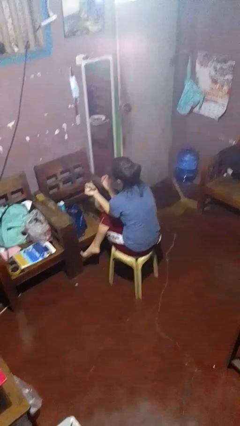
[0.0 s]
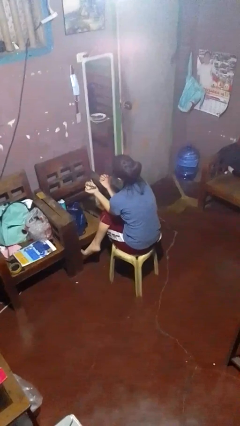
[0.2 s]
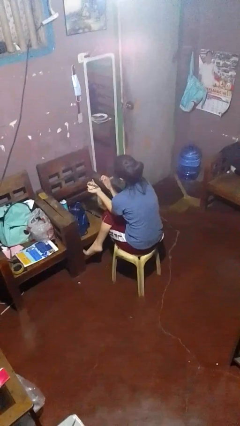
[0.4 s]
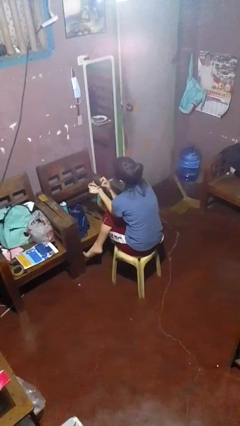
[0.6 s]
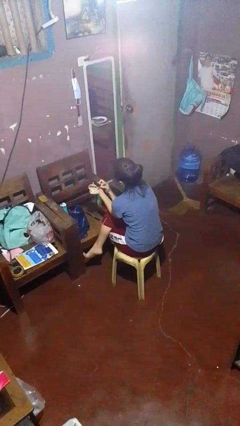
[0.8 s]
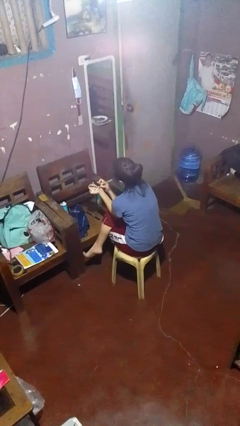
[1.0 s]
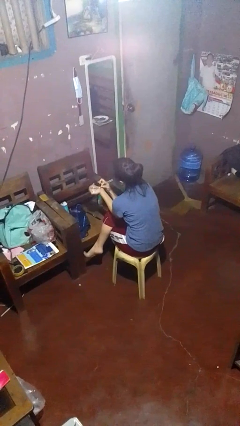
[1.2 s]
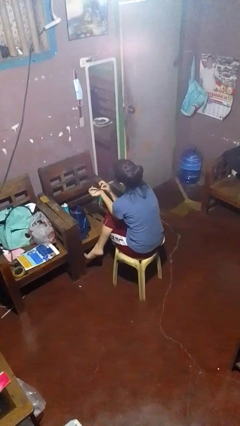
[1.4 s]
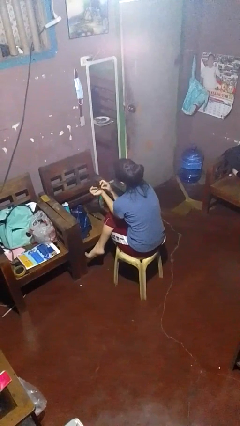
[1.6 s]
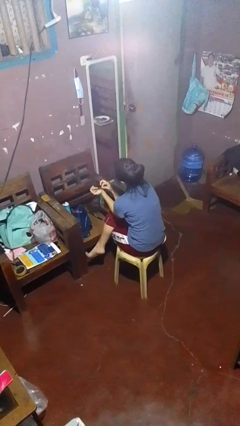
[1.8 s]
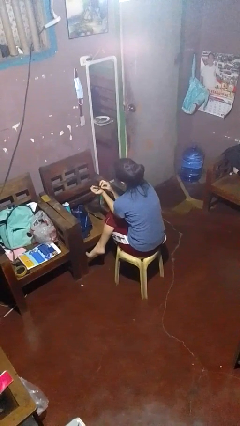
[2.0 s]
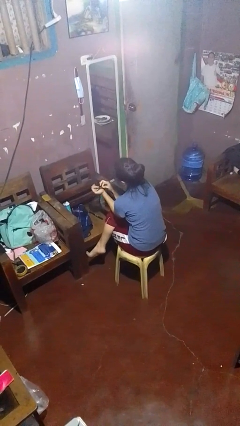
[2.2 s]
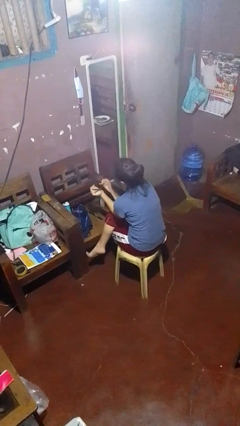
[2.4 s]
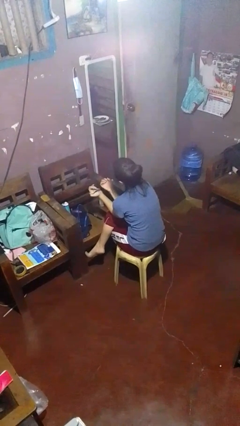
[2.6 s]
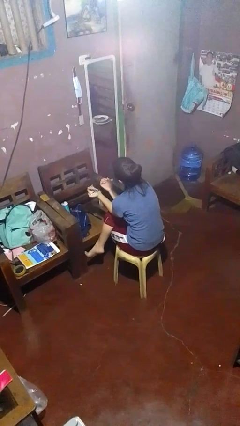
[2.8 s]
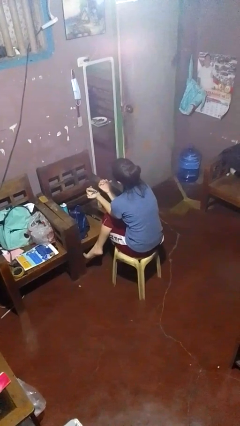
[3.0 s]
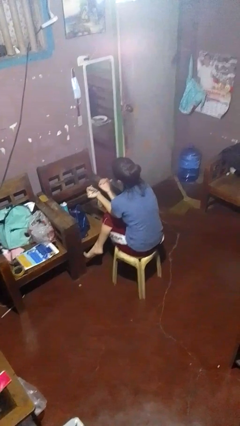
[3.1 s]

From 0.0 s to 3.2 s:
person clips fingernails

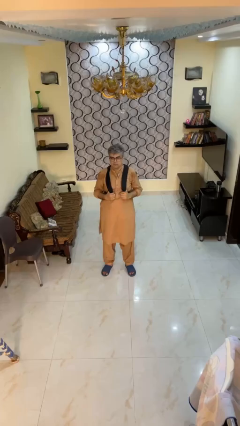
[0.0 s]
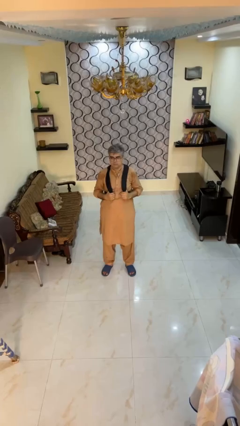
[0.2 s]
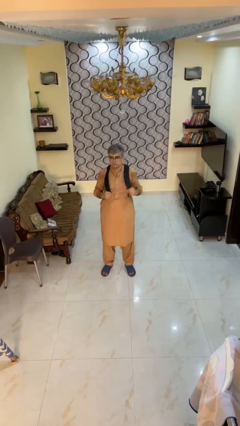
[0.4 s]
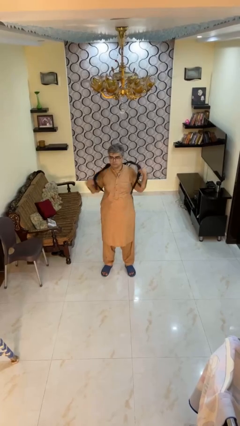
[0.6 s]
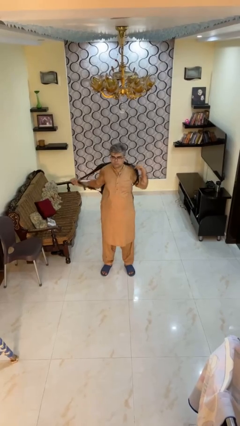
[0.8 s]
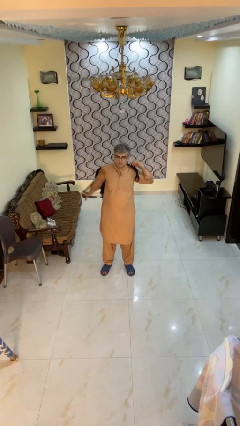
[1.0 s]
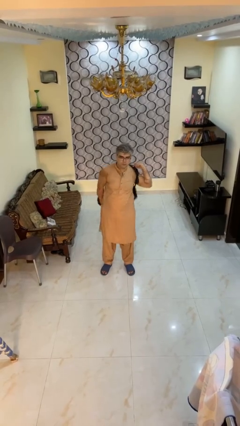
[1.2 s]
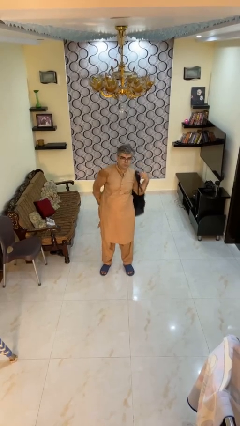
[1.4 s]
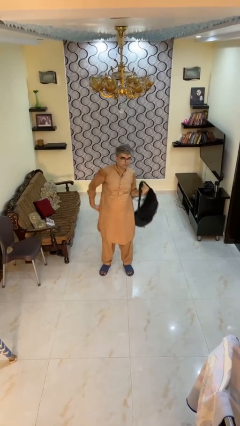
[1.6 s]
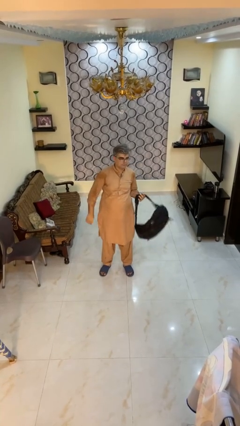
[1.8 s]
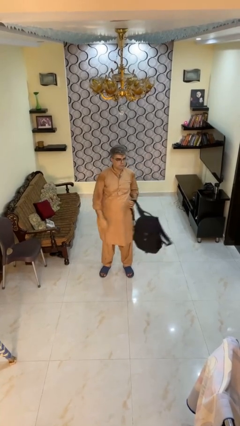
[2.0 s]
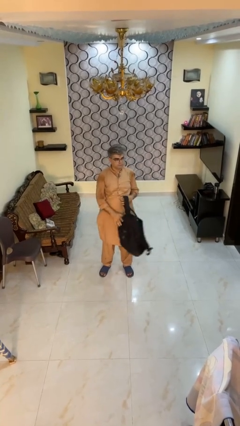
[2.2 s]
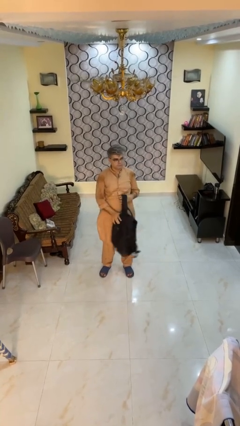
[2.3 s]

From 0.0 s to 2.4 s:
person takes off backpack

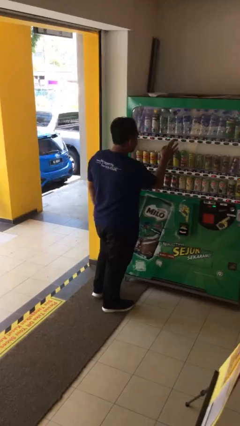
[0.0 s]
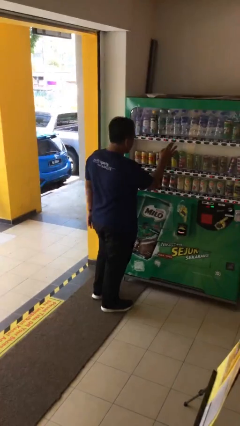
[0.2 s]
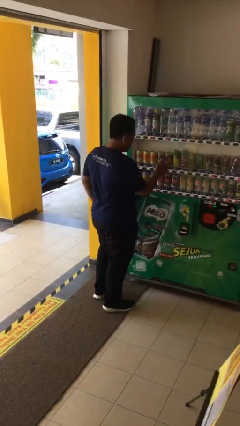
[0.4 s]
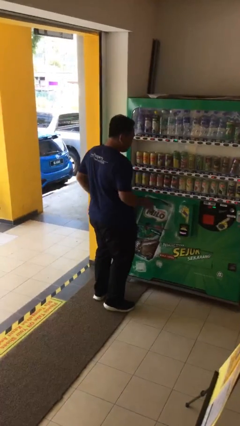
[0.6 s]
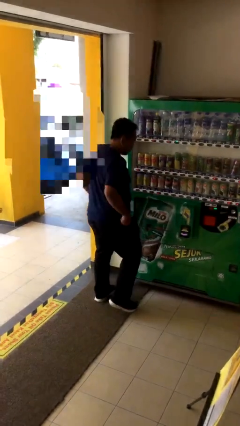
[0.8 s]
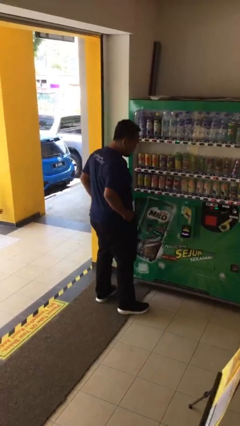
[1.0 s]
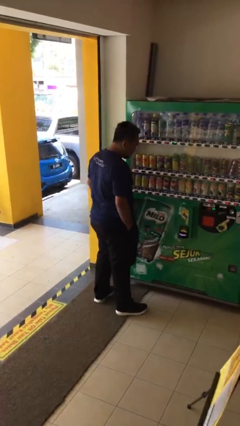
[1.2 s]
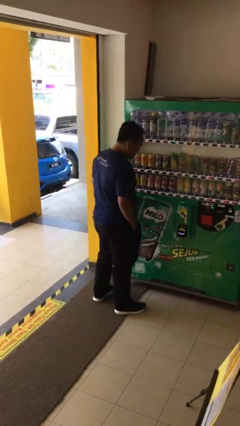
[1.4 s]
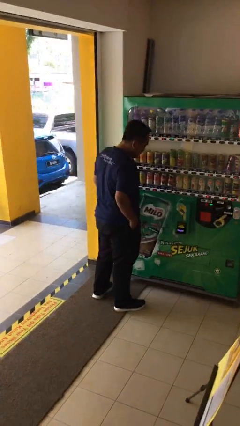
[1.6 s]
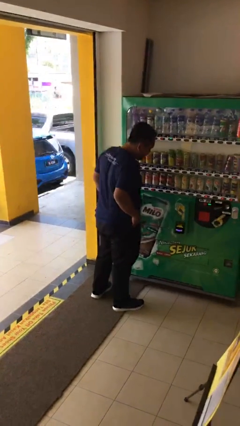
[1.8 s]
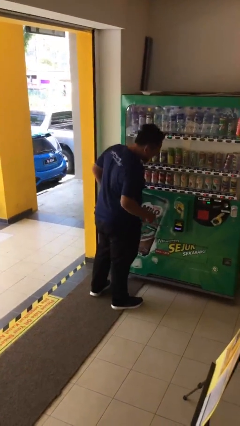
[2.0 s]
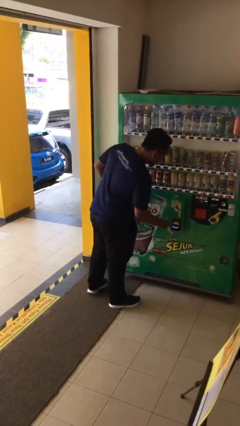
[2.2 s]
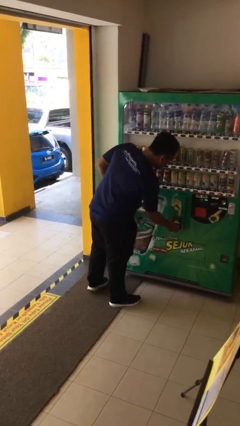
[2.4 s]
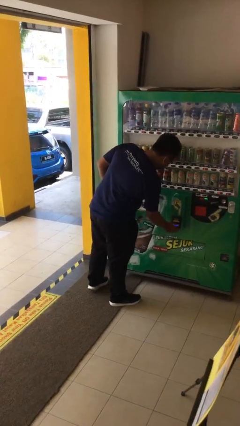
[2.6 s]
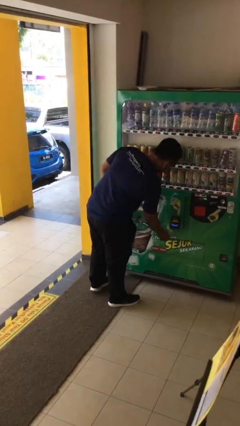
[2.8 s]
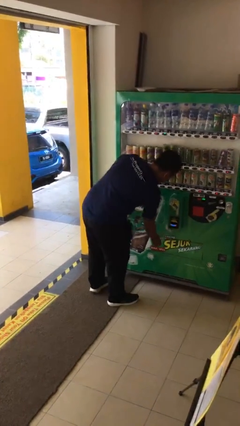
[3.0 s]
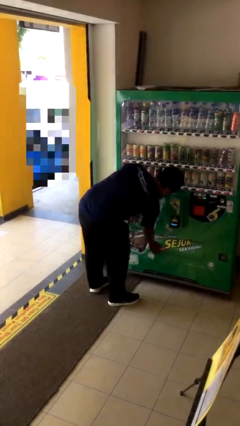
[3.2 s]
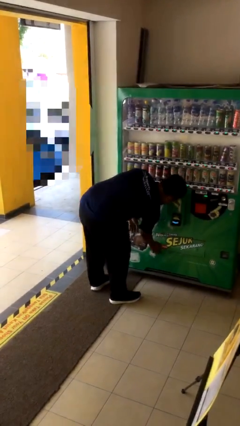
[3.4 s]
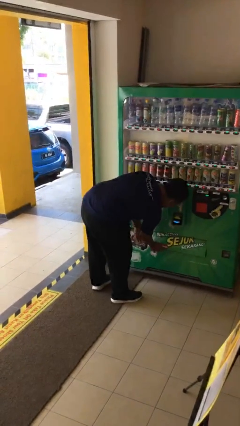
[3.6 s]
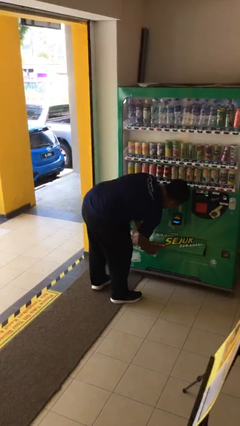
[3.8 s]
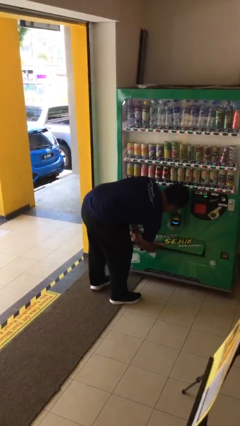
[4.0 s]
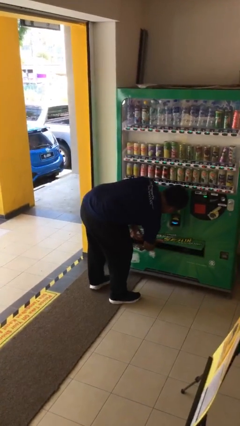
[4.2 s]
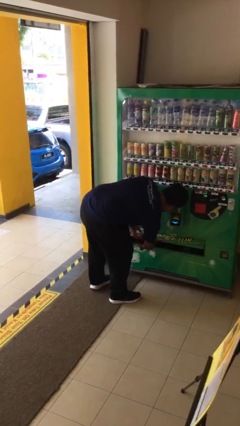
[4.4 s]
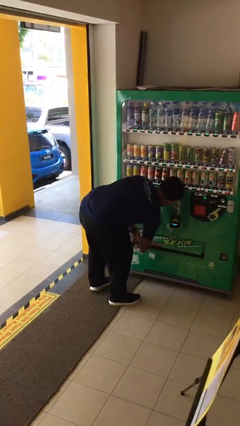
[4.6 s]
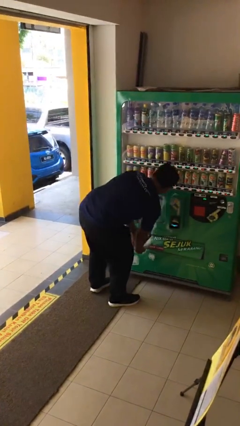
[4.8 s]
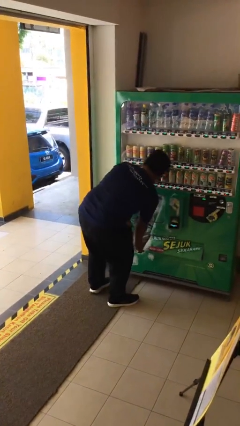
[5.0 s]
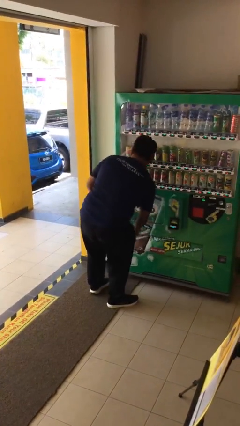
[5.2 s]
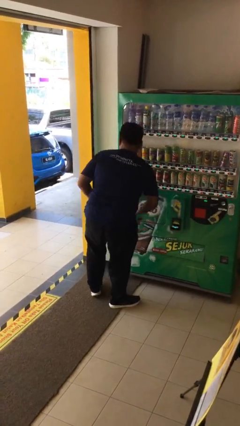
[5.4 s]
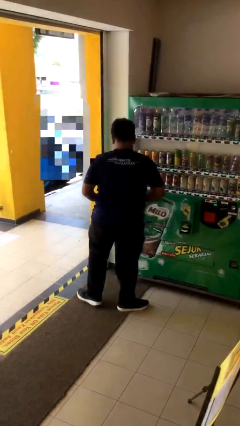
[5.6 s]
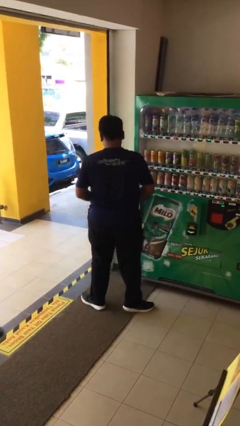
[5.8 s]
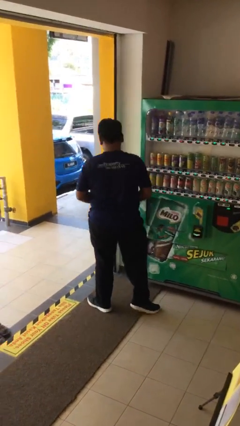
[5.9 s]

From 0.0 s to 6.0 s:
person purchases from machine

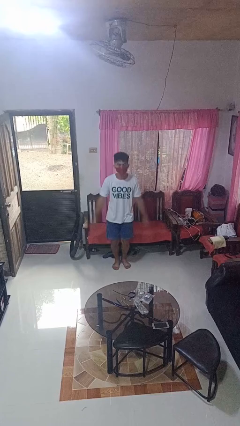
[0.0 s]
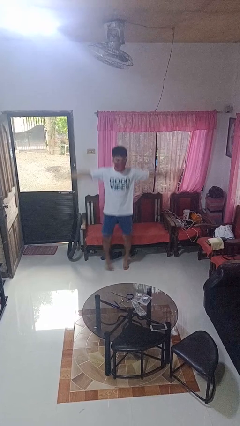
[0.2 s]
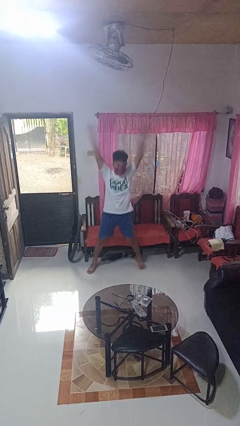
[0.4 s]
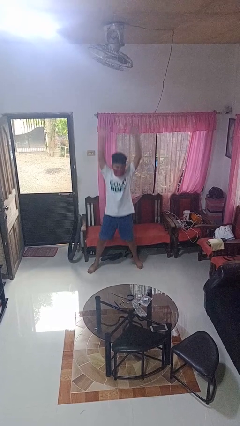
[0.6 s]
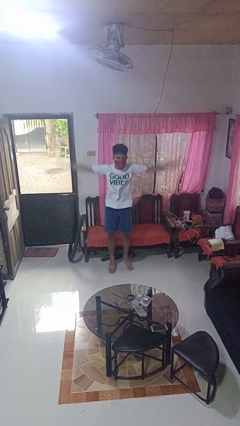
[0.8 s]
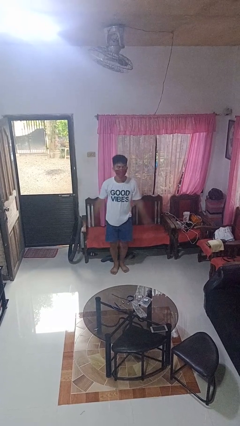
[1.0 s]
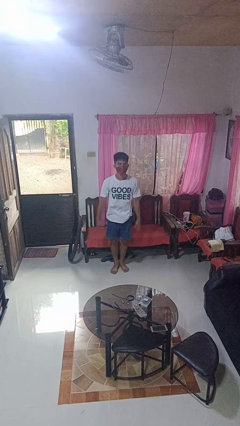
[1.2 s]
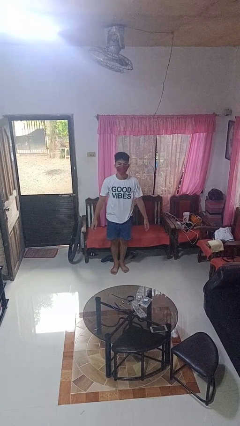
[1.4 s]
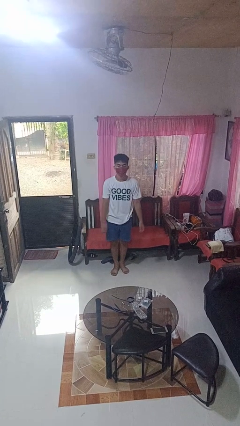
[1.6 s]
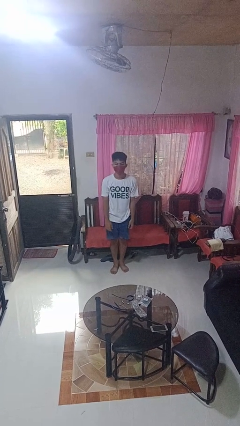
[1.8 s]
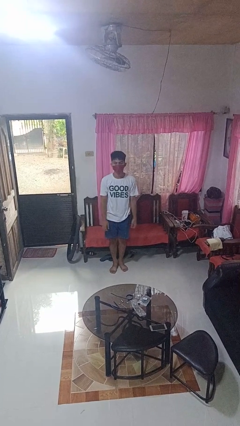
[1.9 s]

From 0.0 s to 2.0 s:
person exercises with jumping jacks

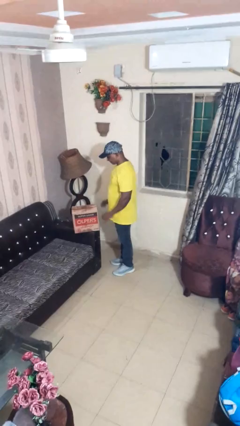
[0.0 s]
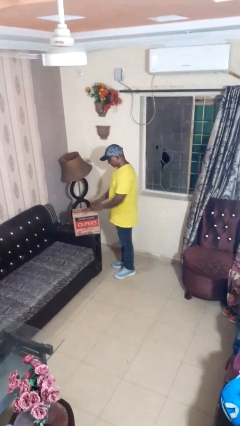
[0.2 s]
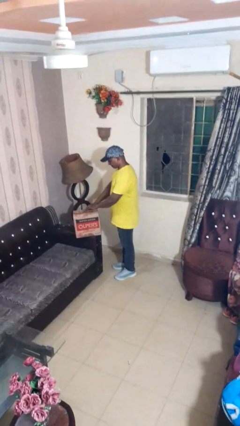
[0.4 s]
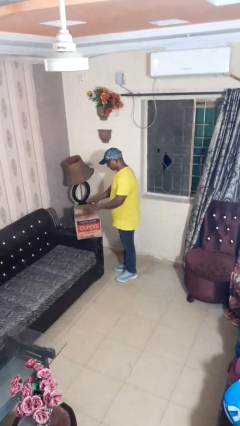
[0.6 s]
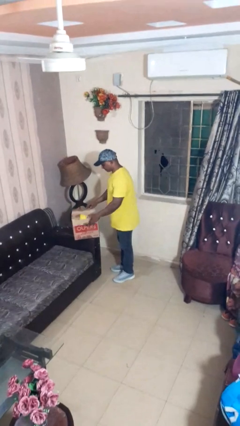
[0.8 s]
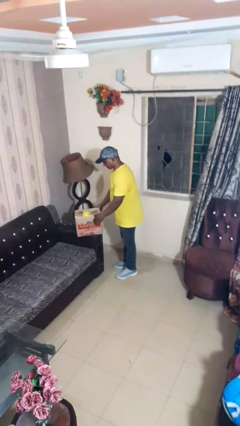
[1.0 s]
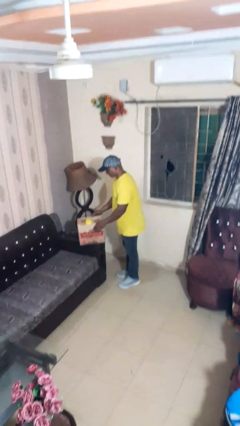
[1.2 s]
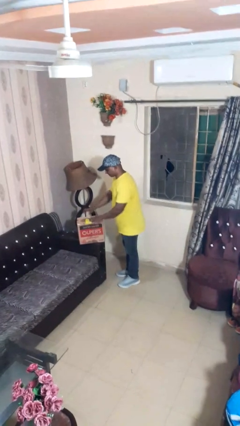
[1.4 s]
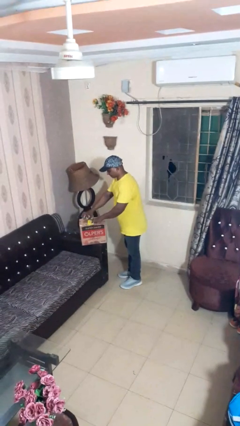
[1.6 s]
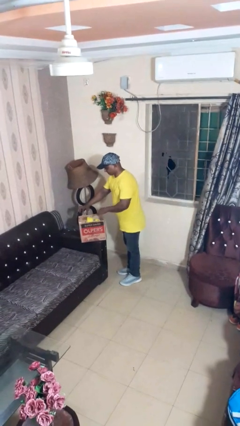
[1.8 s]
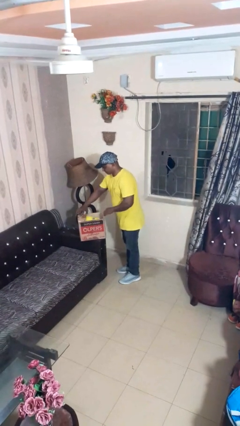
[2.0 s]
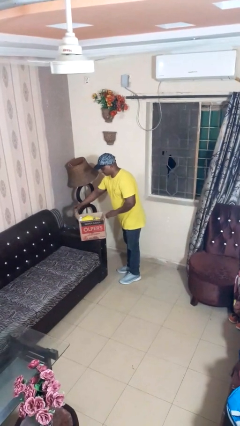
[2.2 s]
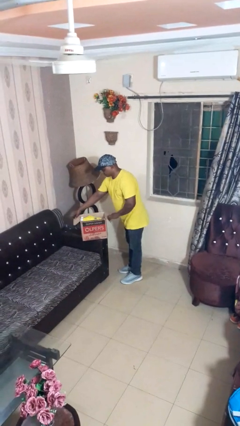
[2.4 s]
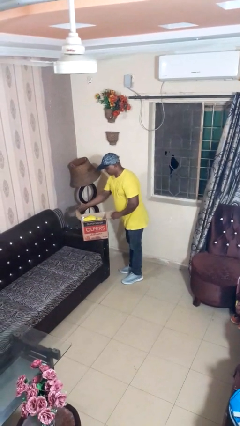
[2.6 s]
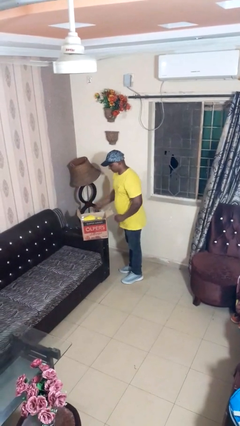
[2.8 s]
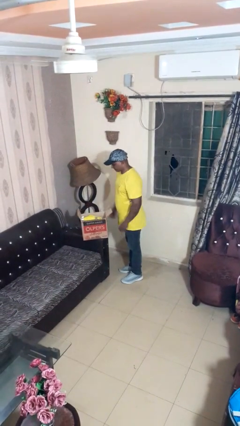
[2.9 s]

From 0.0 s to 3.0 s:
person opens box

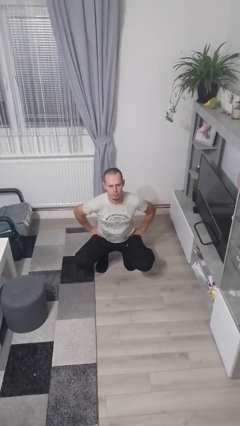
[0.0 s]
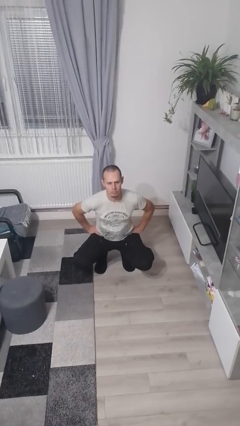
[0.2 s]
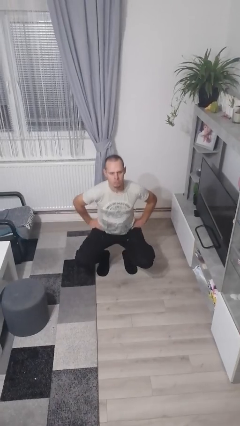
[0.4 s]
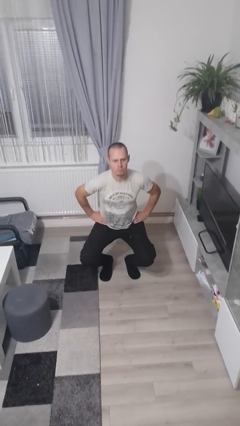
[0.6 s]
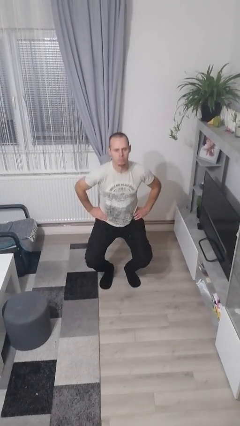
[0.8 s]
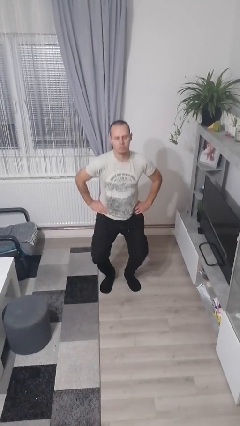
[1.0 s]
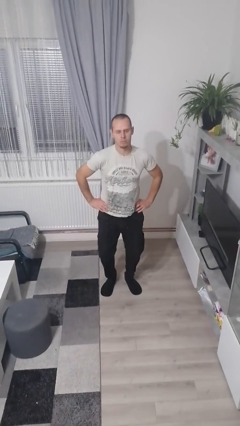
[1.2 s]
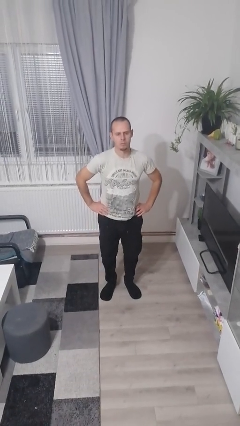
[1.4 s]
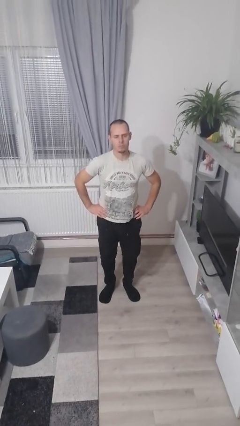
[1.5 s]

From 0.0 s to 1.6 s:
person stands up
